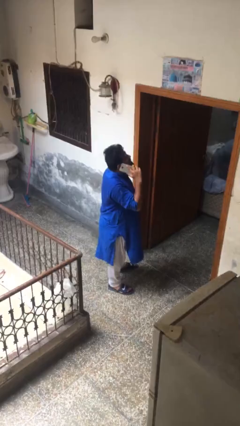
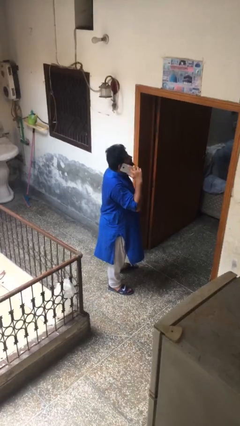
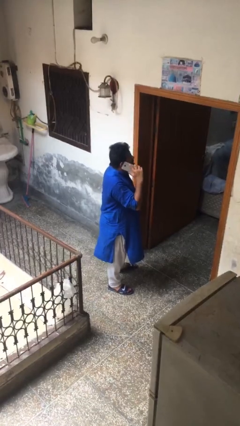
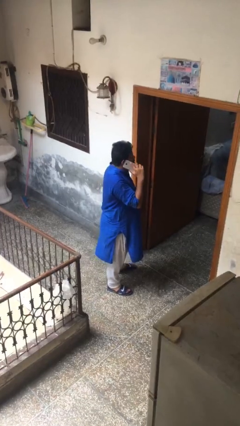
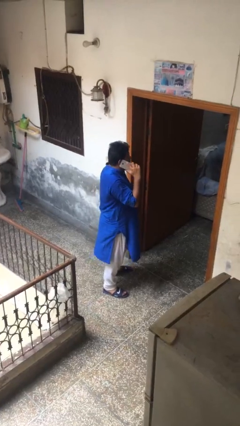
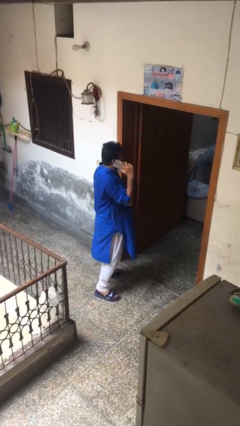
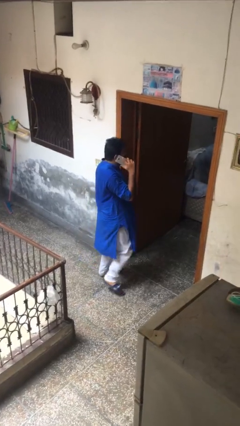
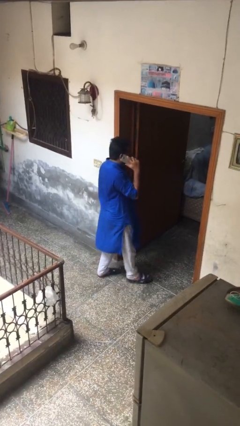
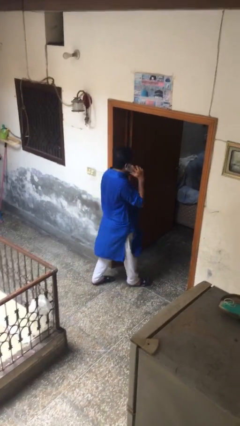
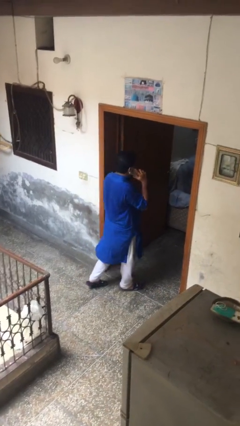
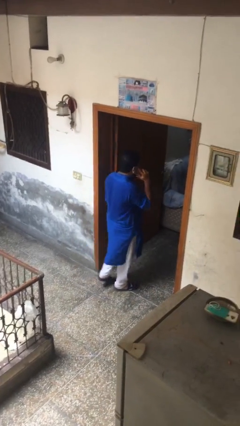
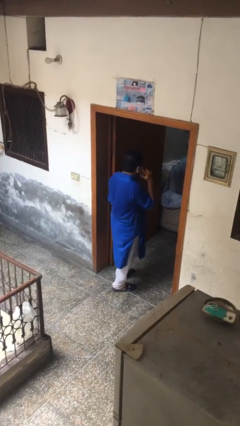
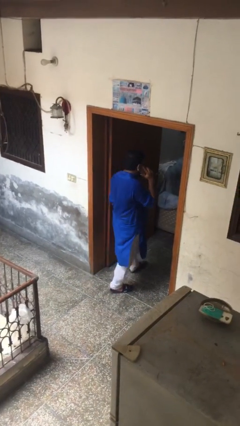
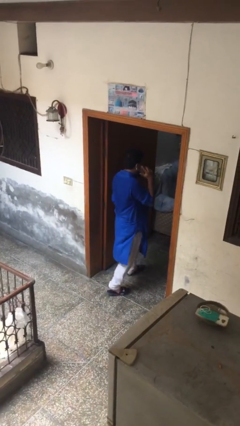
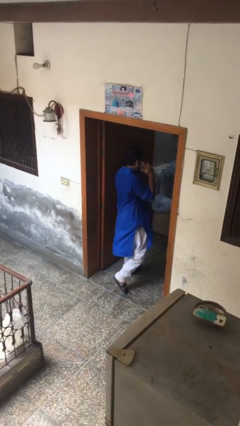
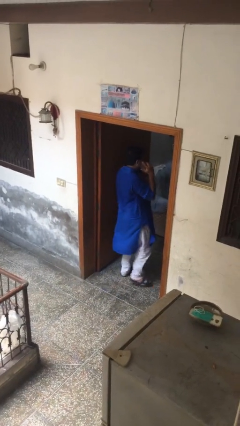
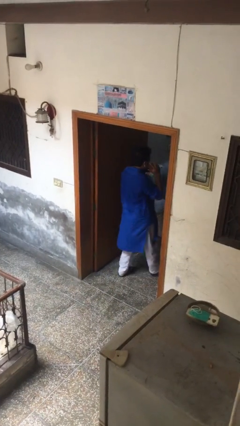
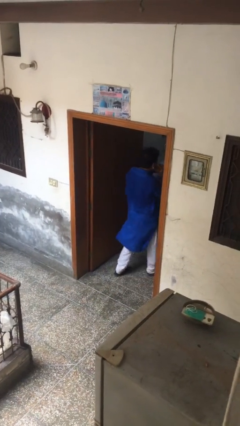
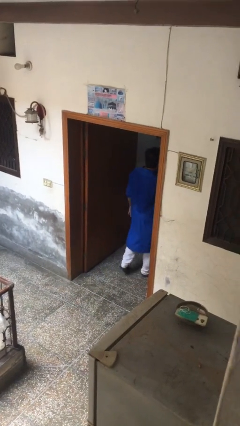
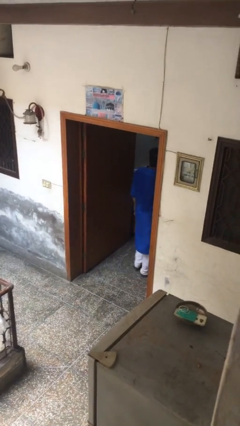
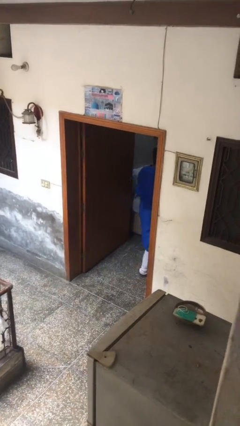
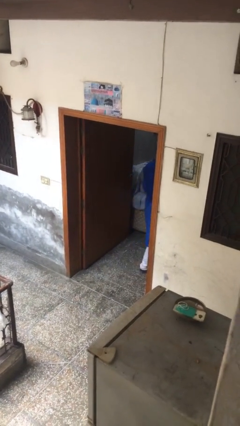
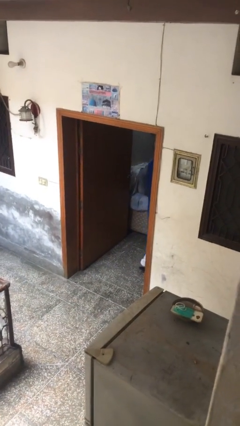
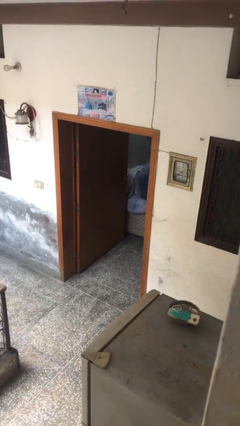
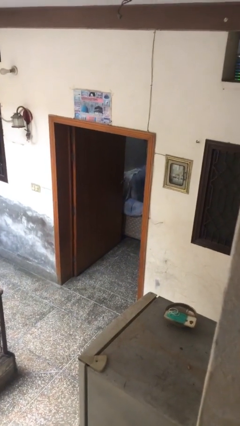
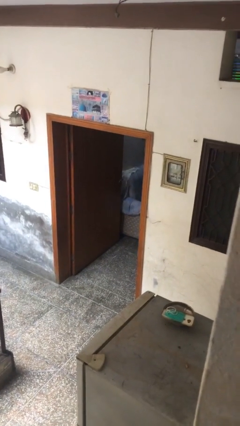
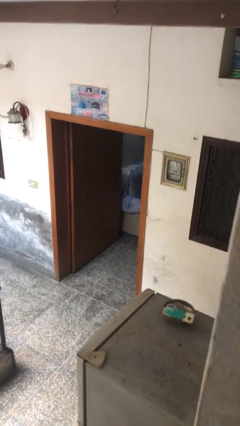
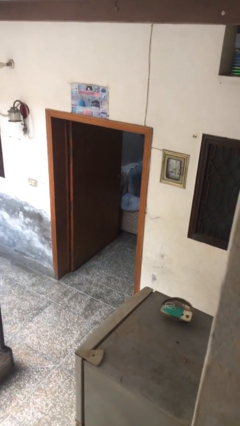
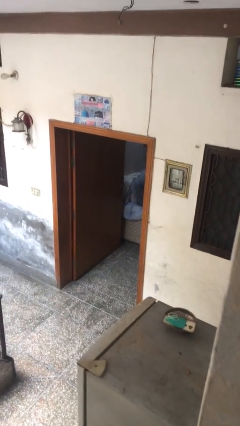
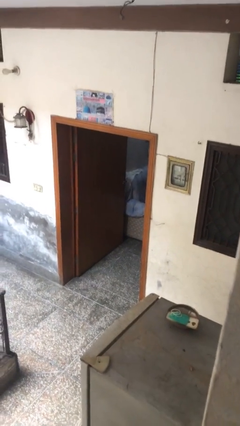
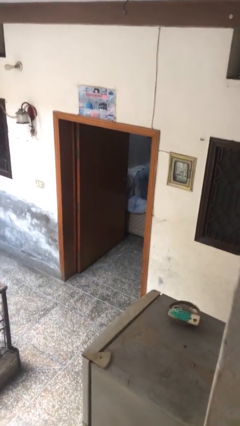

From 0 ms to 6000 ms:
person exits scene through structure

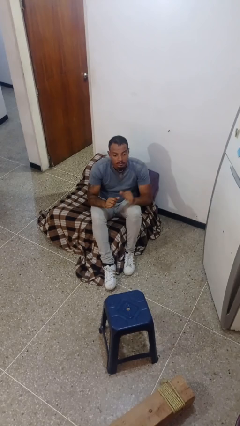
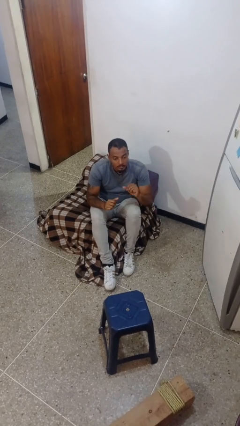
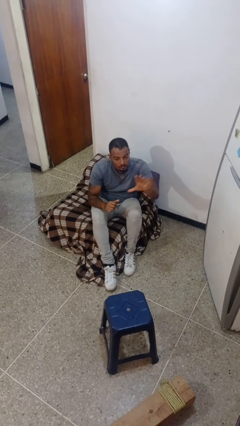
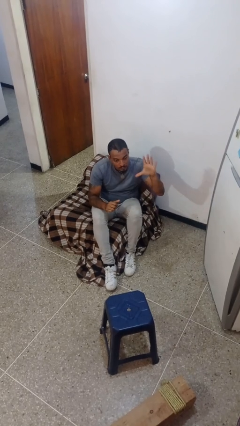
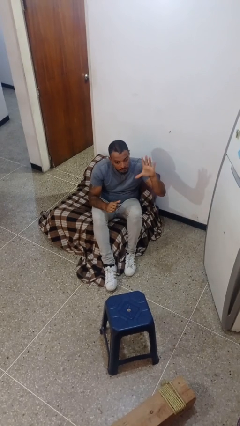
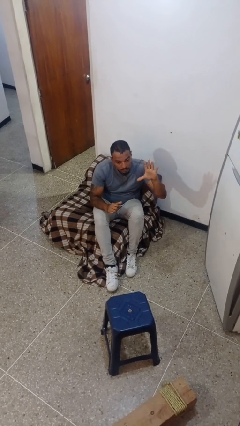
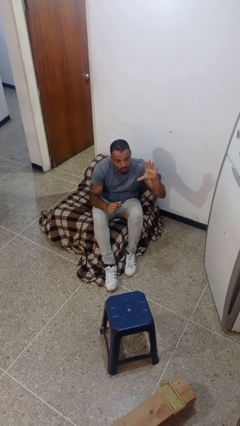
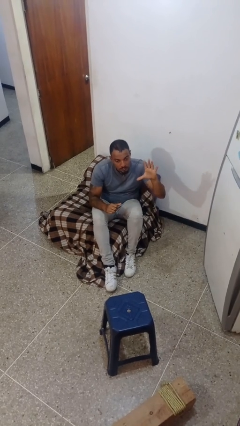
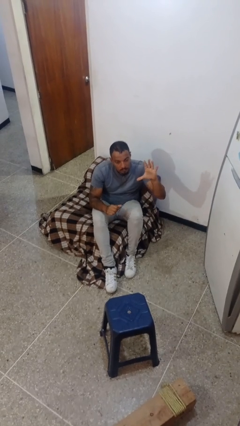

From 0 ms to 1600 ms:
person gestures zoom in

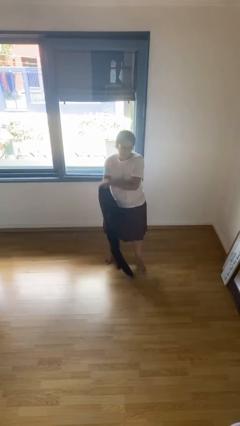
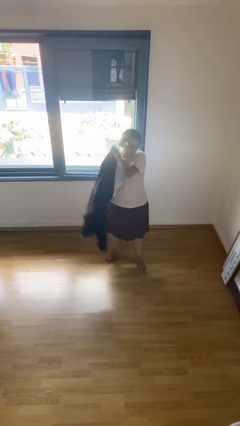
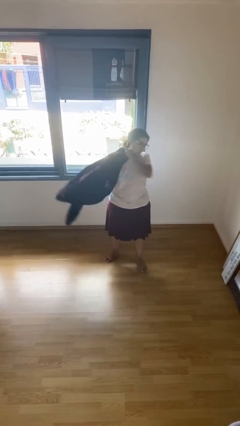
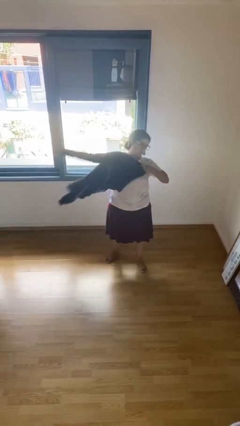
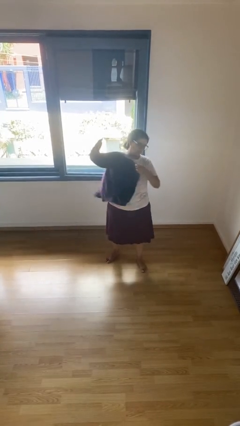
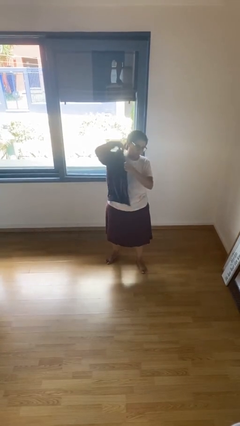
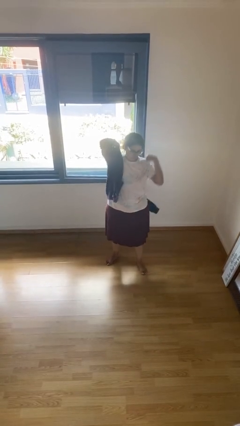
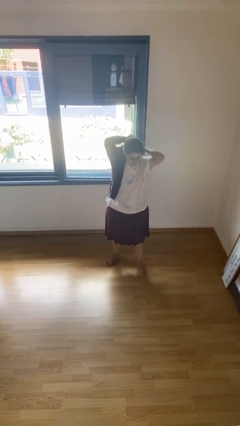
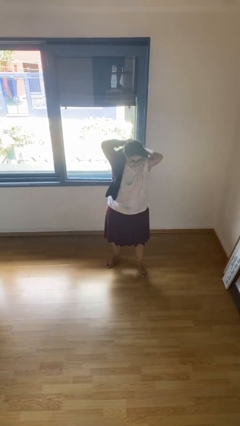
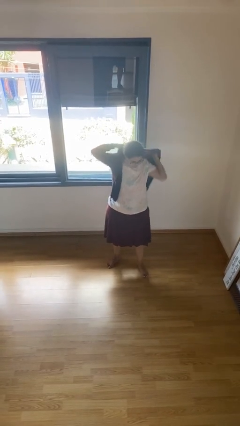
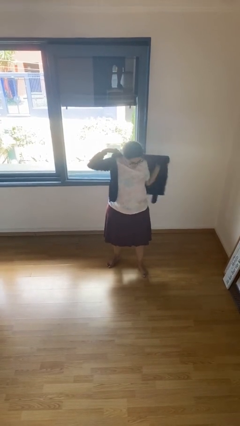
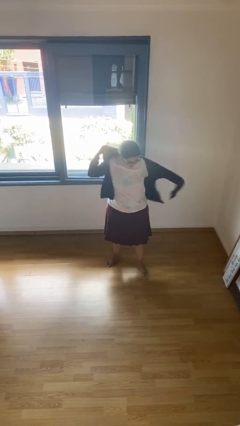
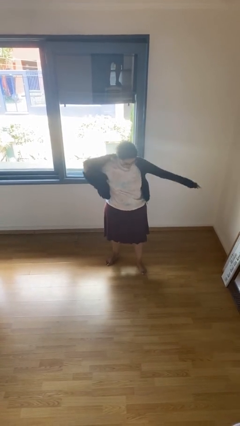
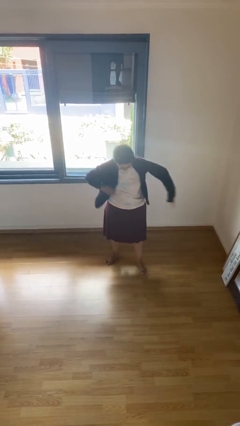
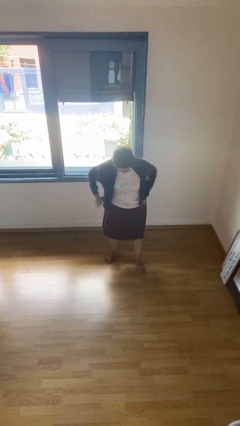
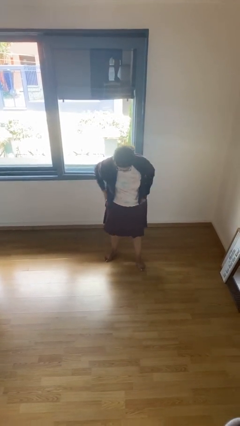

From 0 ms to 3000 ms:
person puts on jacket

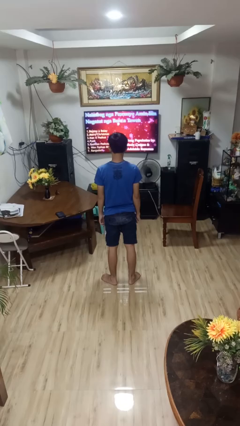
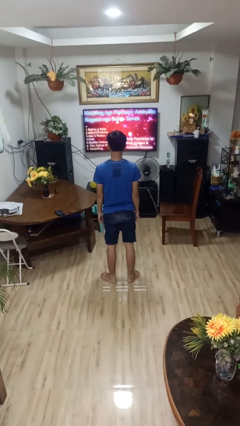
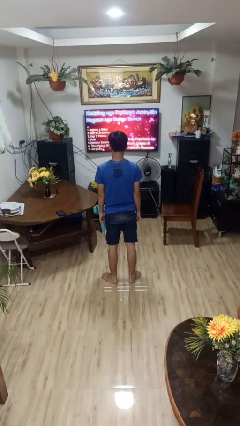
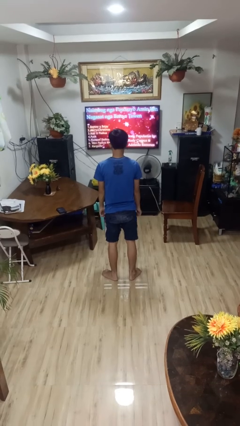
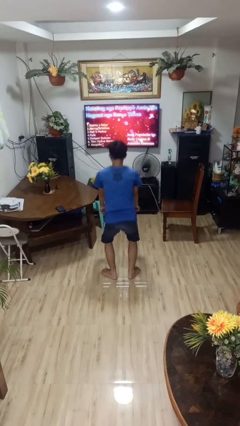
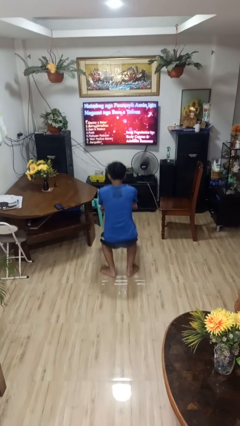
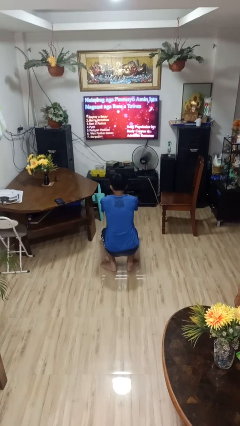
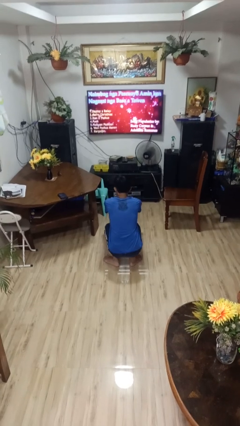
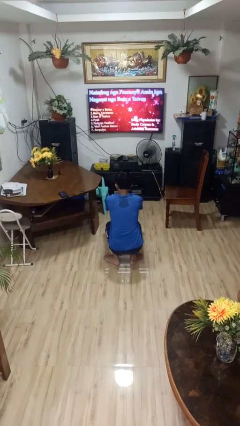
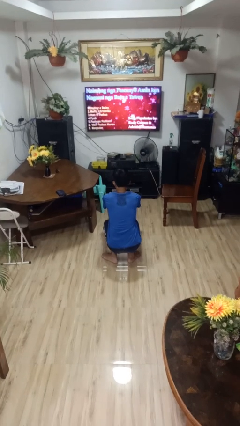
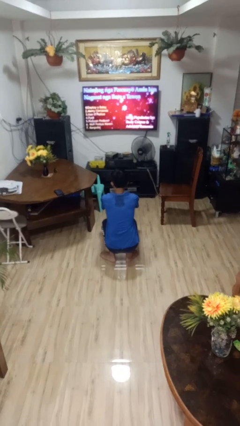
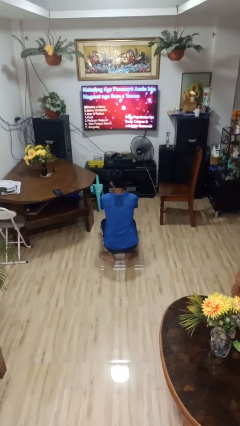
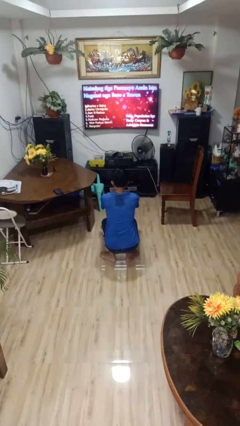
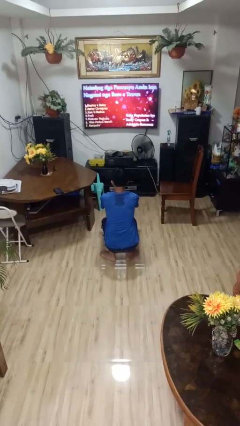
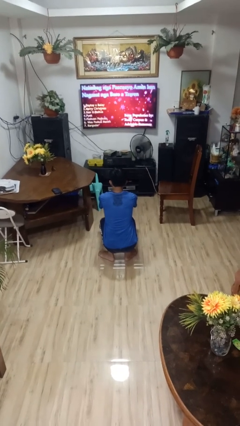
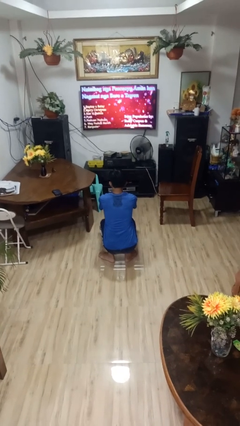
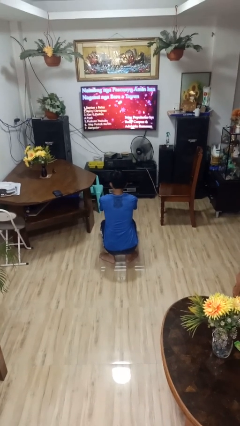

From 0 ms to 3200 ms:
person squats

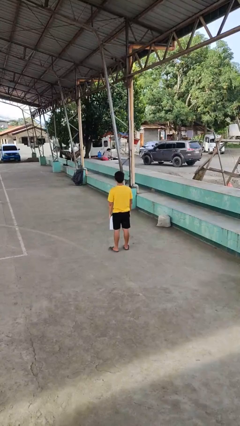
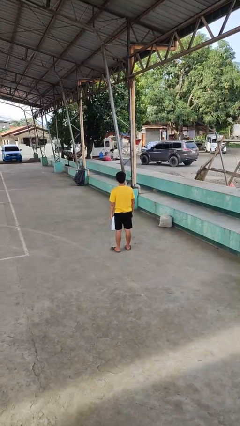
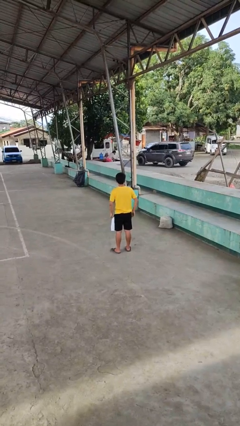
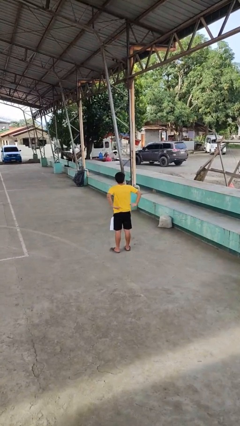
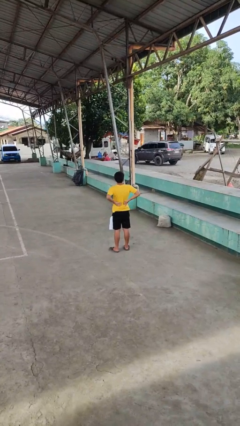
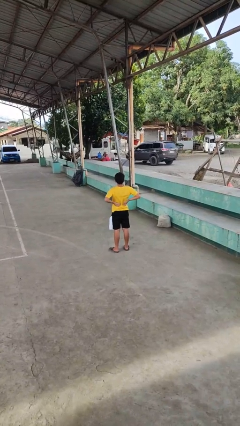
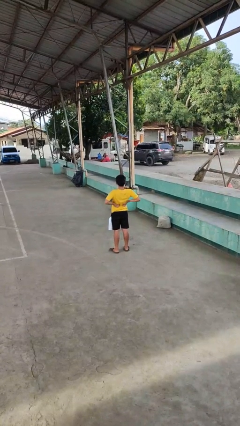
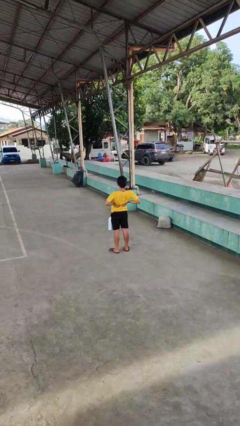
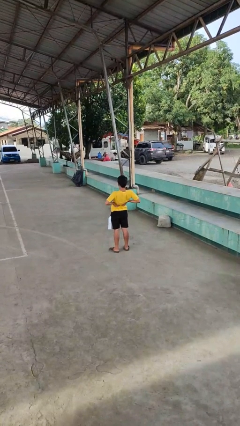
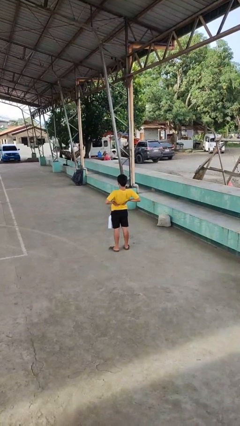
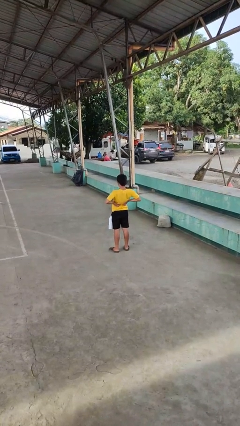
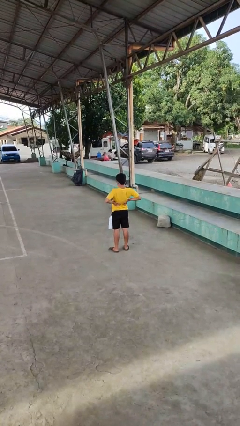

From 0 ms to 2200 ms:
person stretches back

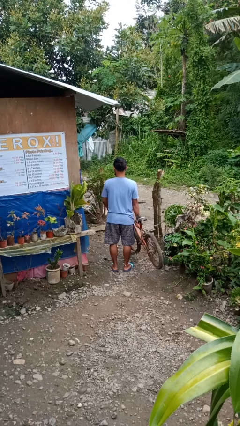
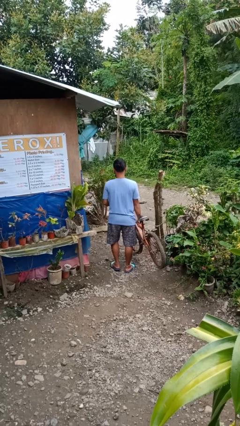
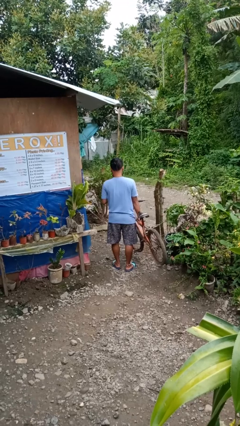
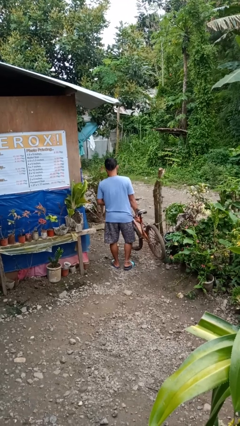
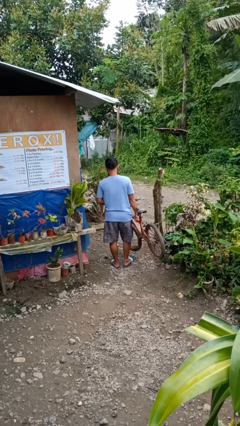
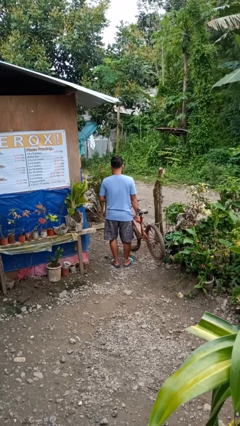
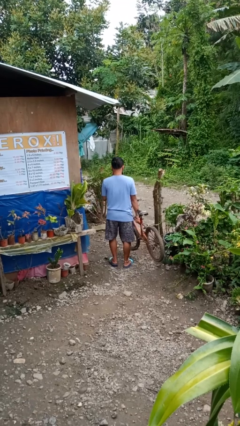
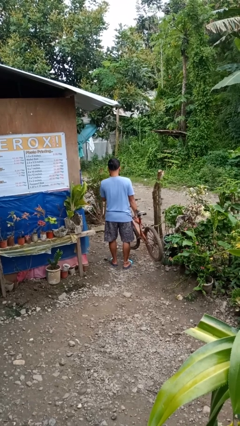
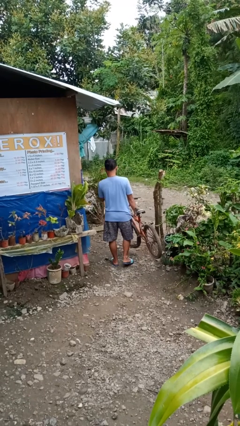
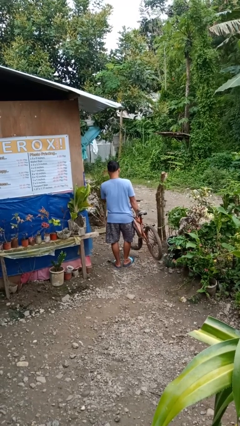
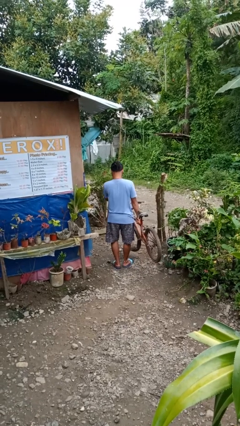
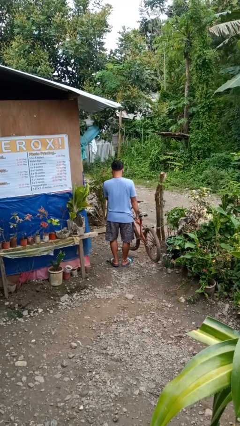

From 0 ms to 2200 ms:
person carries bicycle
